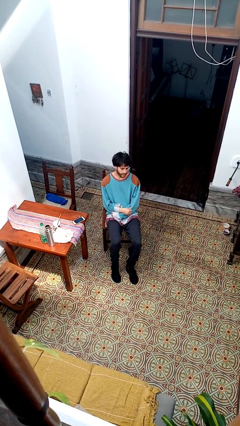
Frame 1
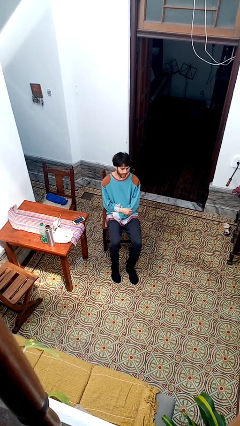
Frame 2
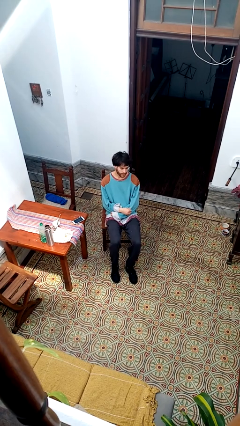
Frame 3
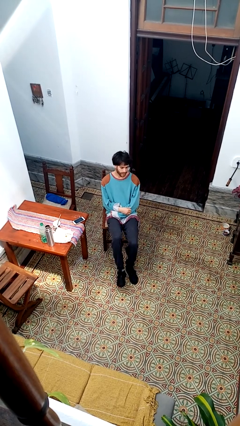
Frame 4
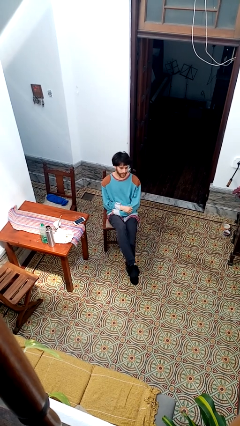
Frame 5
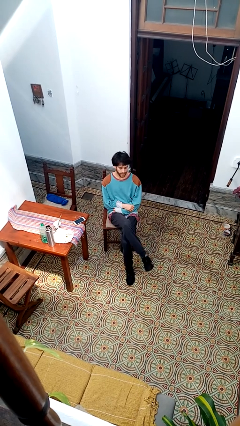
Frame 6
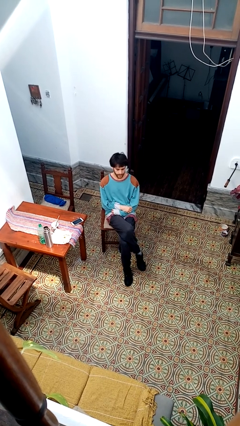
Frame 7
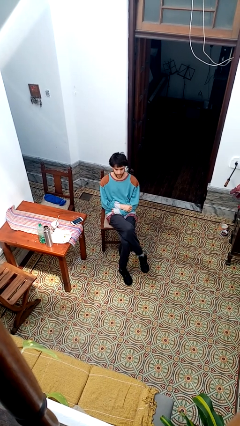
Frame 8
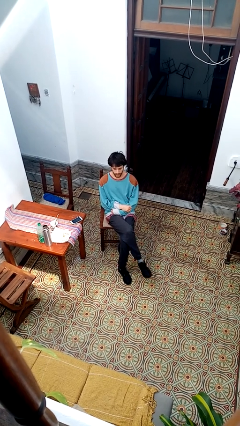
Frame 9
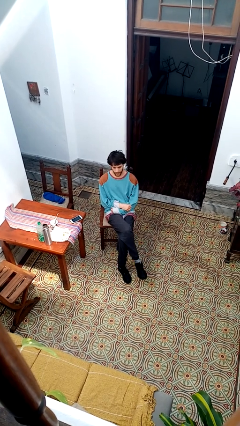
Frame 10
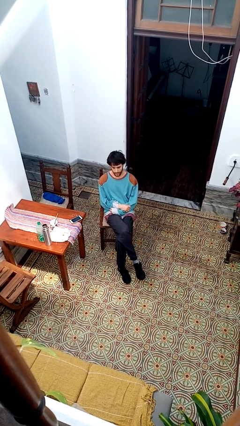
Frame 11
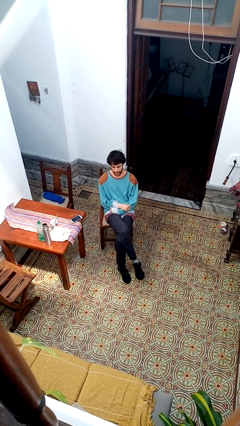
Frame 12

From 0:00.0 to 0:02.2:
person crosses legs

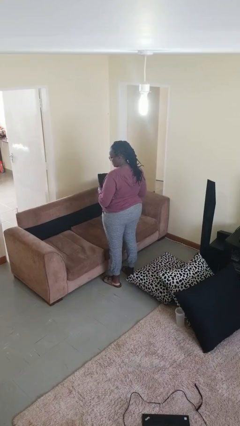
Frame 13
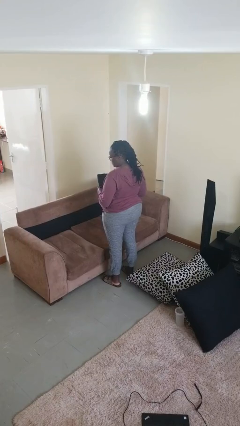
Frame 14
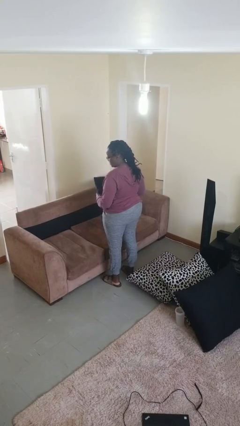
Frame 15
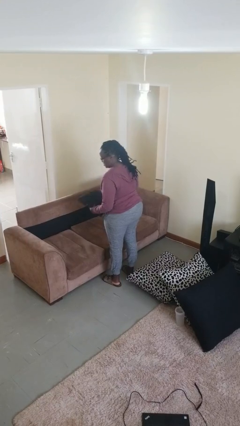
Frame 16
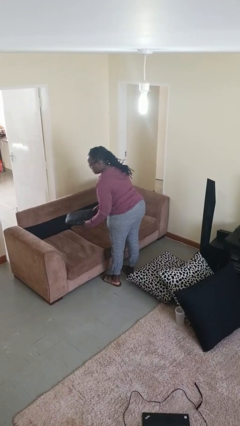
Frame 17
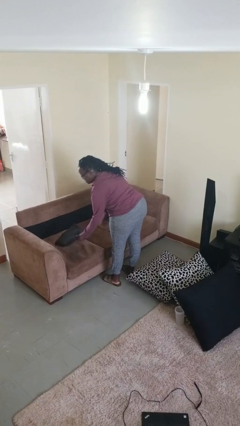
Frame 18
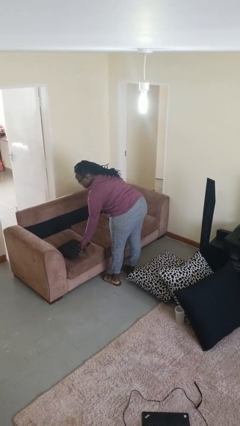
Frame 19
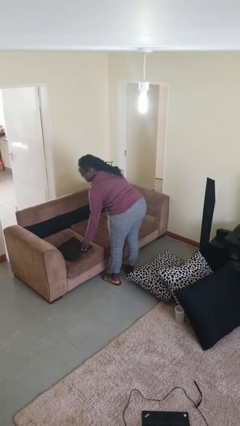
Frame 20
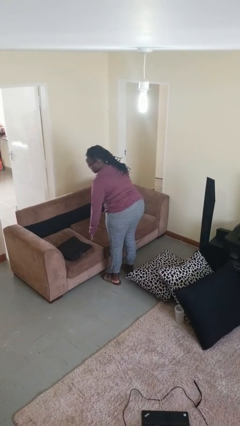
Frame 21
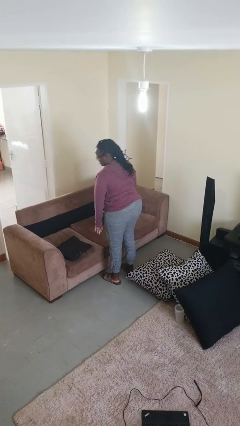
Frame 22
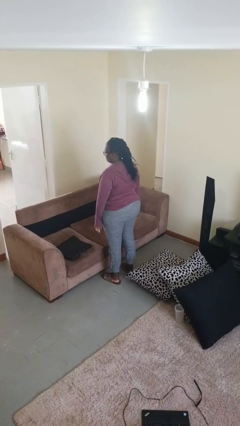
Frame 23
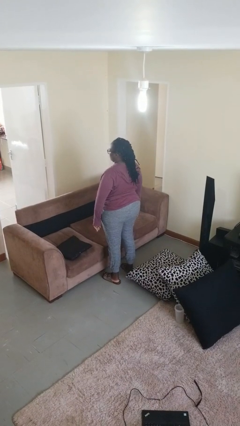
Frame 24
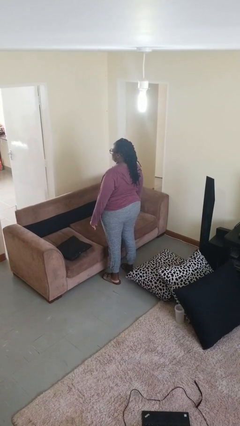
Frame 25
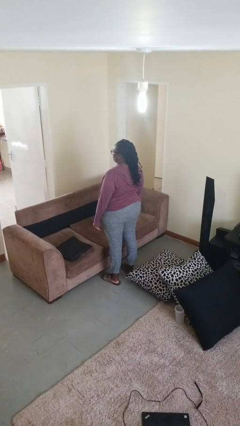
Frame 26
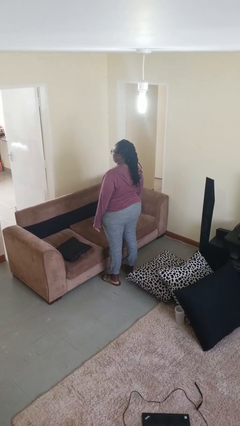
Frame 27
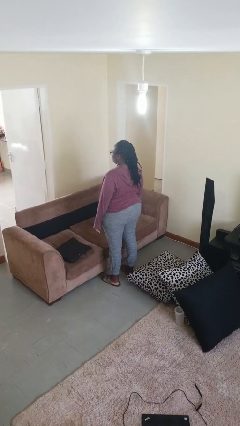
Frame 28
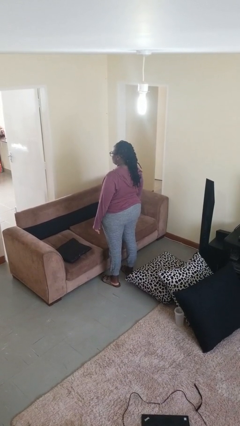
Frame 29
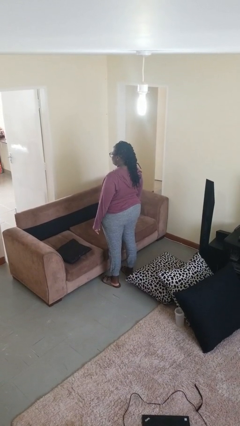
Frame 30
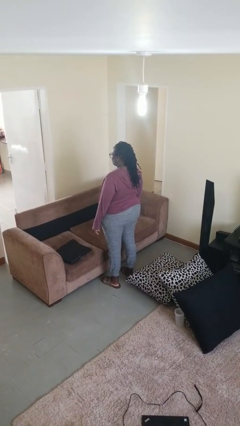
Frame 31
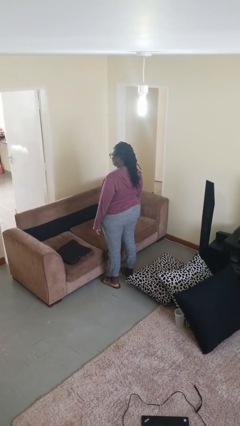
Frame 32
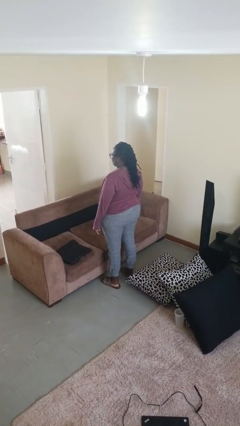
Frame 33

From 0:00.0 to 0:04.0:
person puts down object on couch

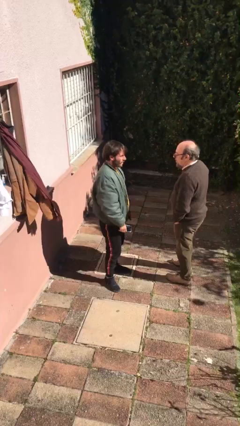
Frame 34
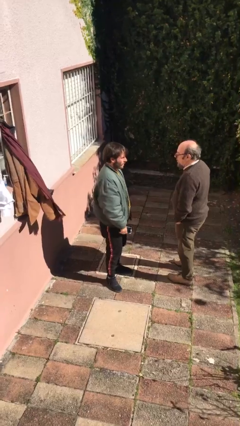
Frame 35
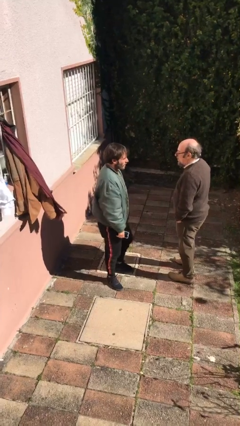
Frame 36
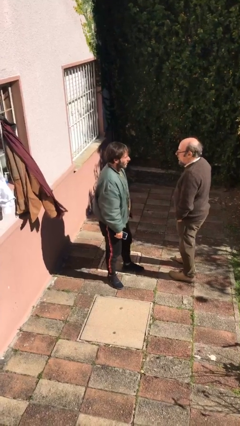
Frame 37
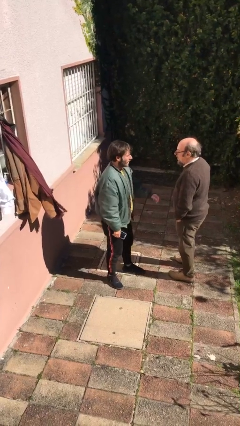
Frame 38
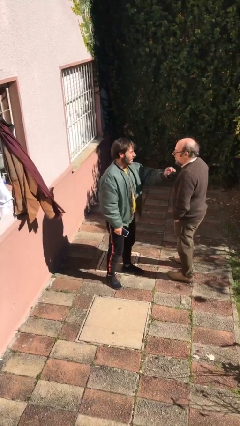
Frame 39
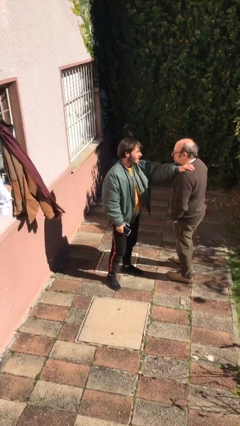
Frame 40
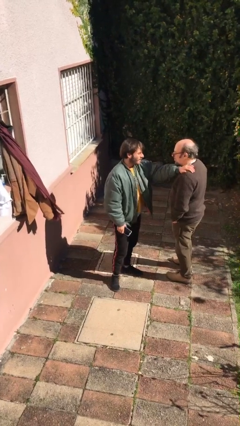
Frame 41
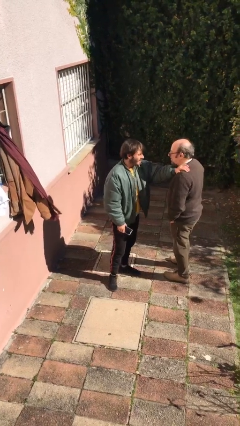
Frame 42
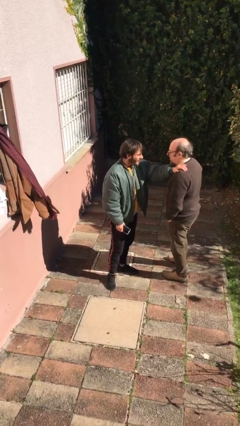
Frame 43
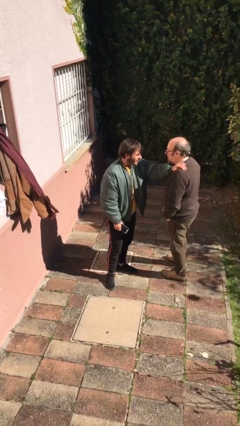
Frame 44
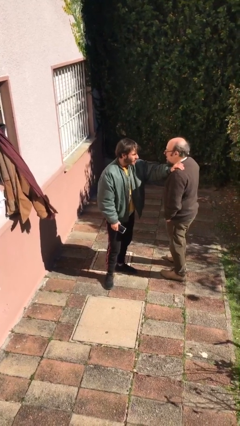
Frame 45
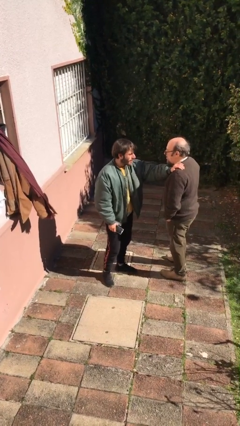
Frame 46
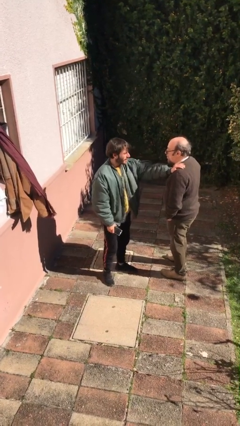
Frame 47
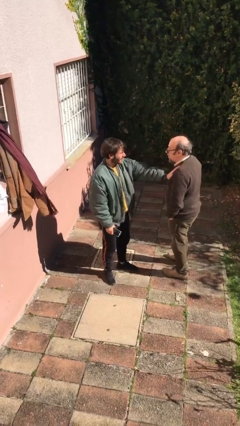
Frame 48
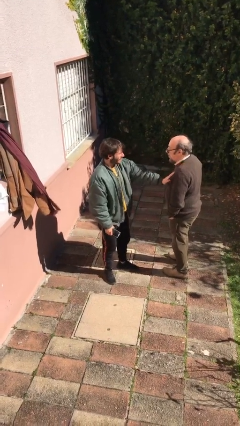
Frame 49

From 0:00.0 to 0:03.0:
person pounds shoulders of person

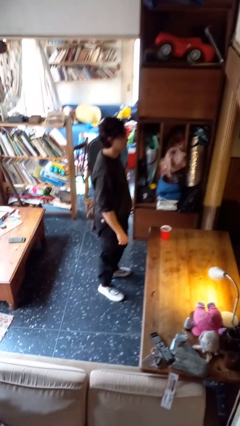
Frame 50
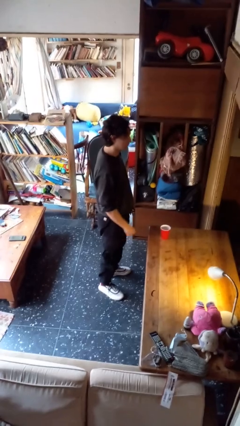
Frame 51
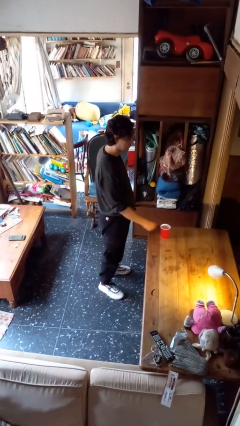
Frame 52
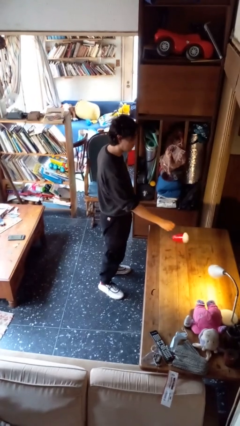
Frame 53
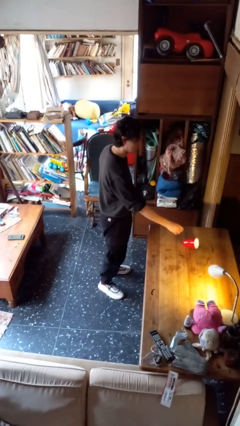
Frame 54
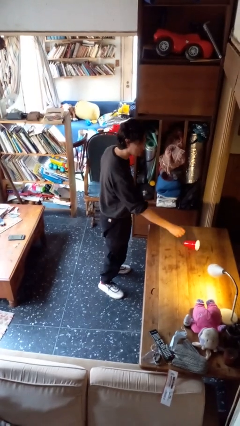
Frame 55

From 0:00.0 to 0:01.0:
person knocks over glass

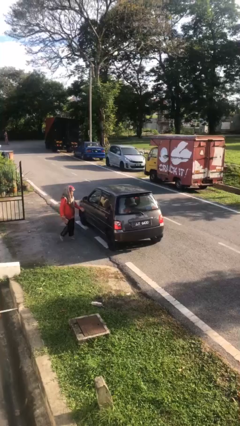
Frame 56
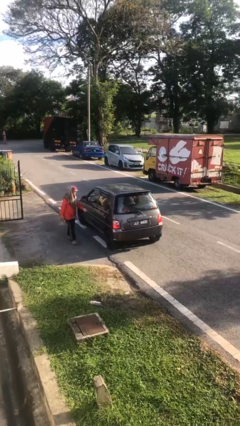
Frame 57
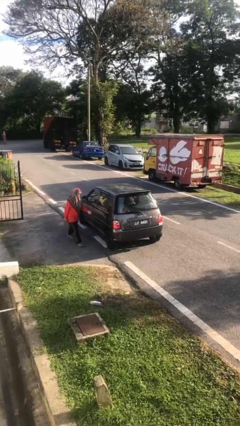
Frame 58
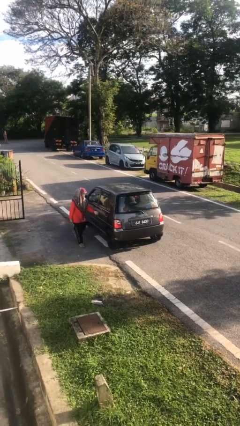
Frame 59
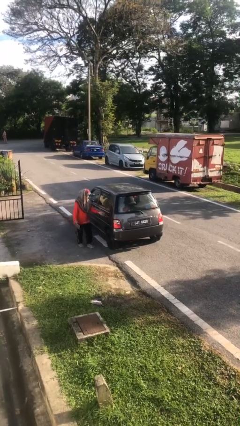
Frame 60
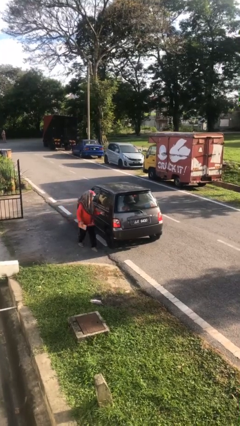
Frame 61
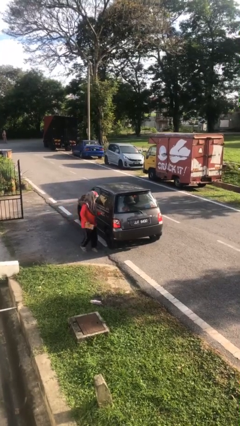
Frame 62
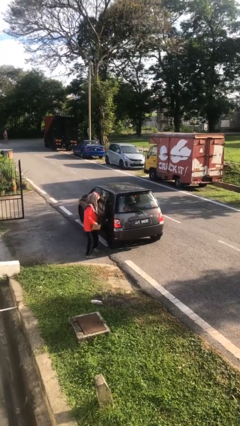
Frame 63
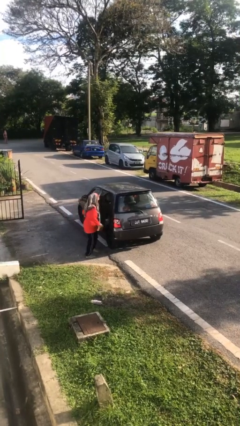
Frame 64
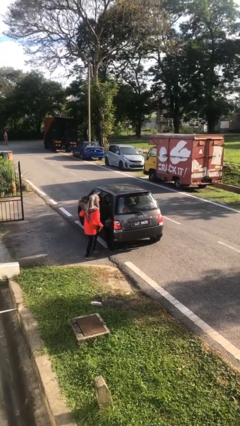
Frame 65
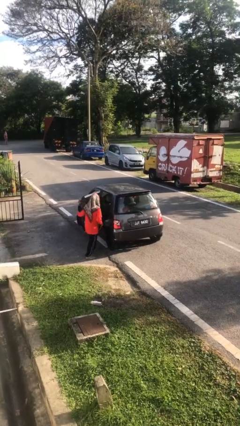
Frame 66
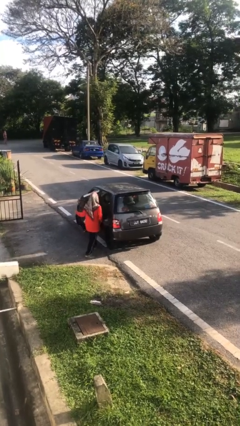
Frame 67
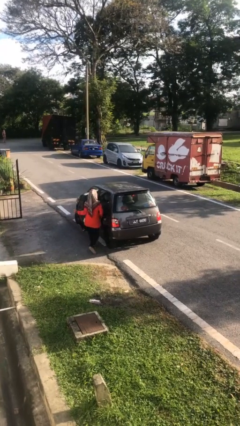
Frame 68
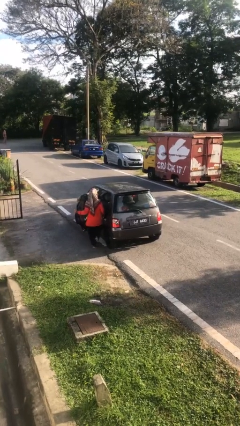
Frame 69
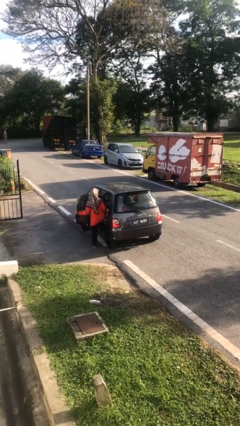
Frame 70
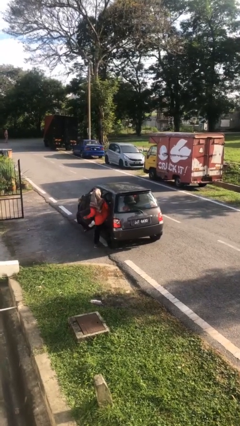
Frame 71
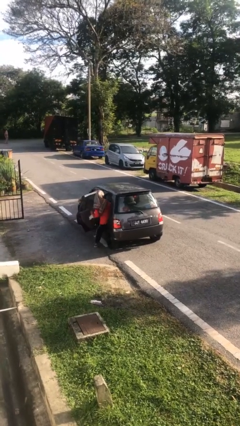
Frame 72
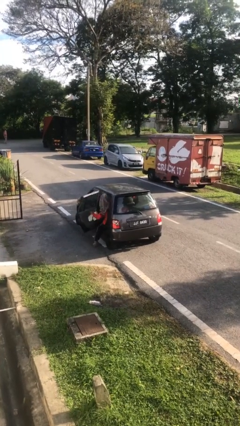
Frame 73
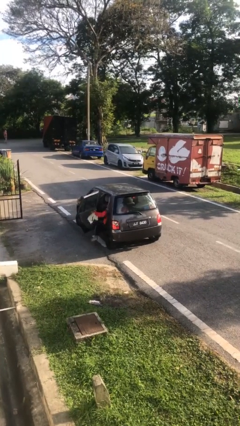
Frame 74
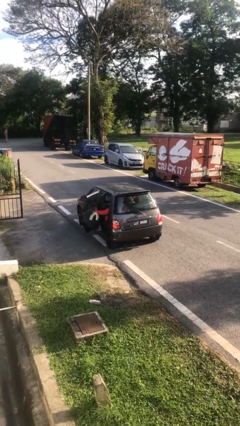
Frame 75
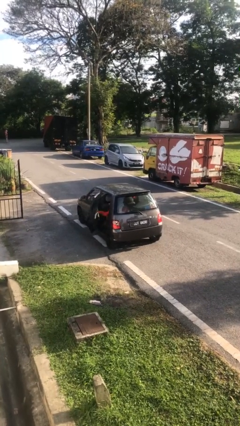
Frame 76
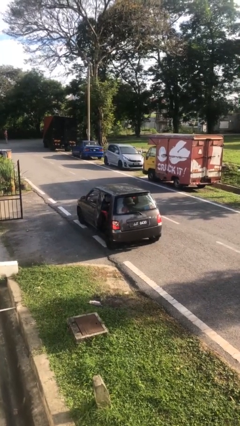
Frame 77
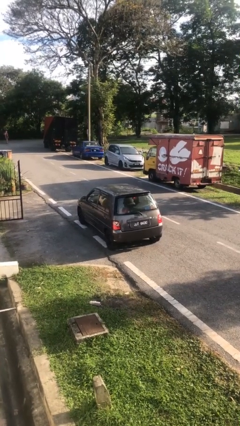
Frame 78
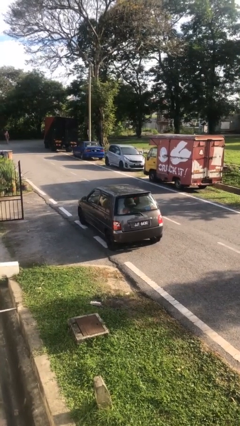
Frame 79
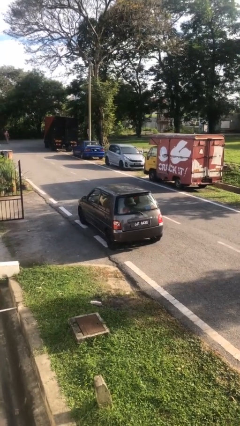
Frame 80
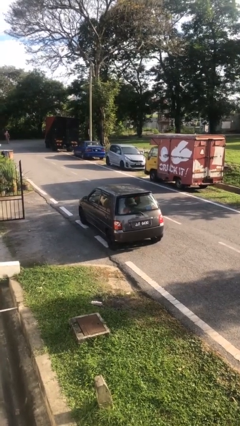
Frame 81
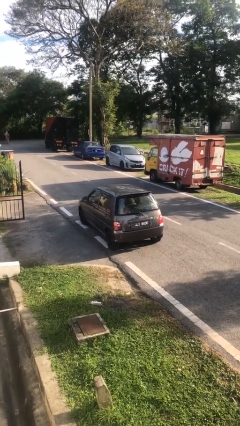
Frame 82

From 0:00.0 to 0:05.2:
car picks up person

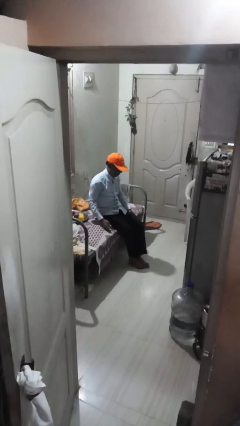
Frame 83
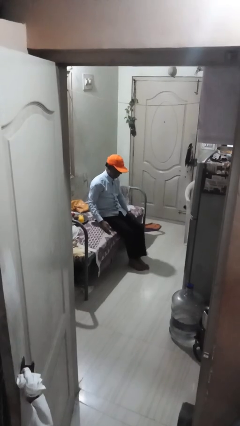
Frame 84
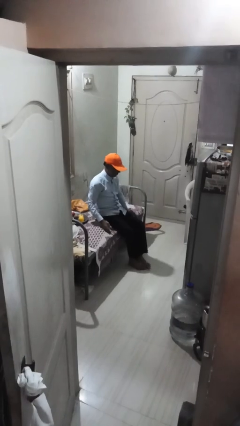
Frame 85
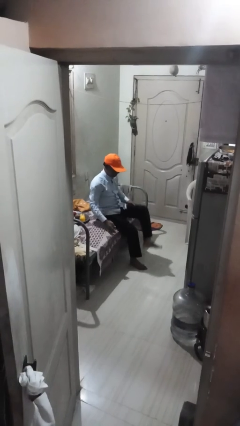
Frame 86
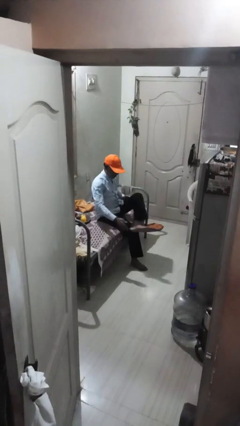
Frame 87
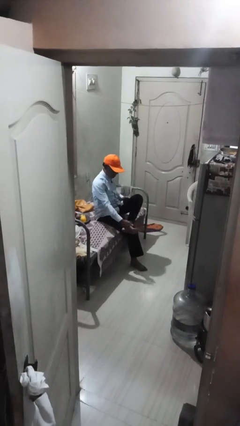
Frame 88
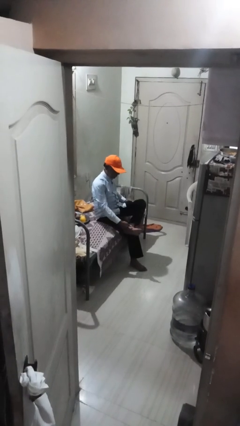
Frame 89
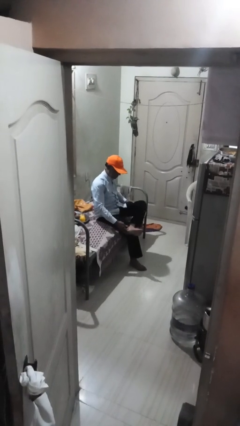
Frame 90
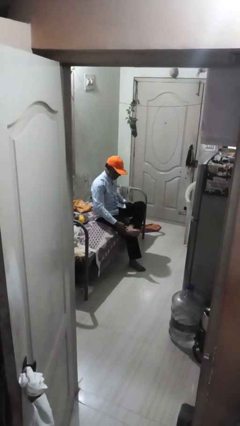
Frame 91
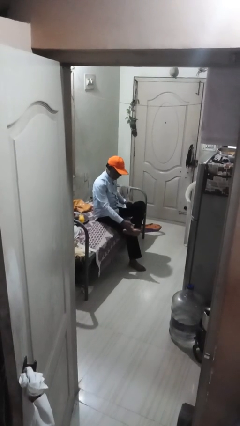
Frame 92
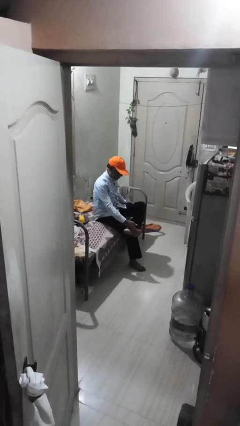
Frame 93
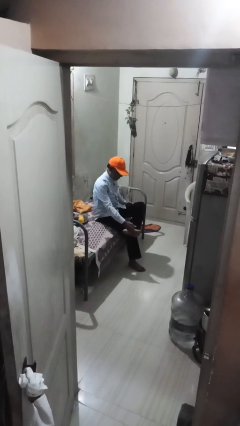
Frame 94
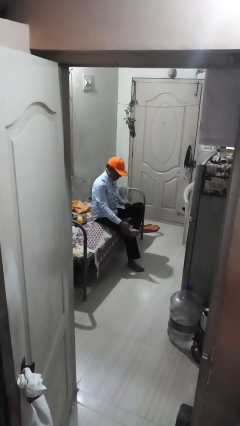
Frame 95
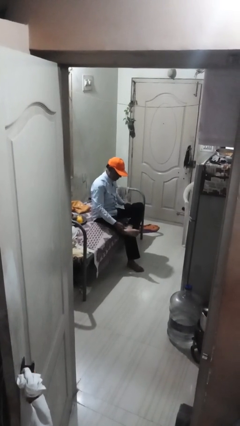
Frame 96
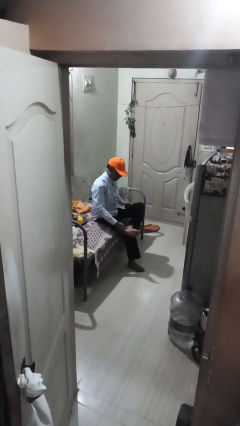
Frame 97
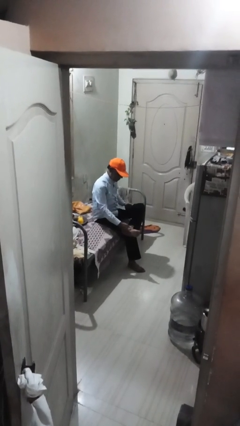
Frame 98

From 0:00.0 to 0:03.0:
person rubs foot
